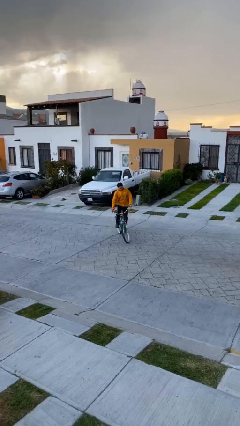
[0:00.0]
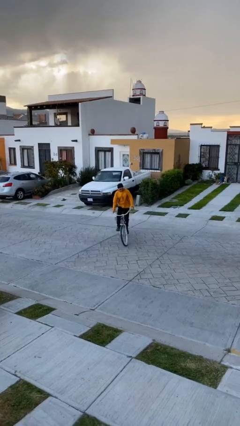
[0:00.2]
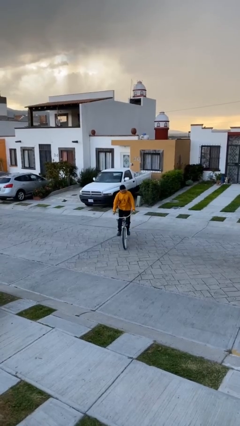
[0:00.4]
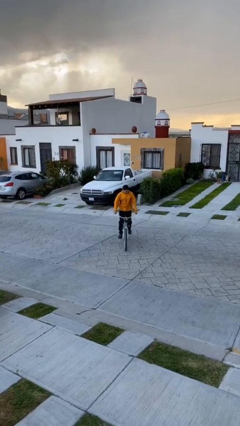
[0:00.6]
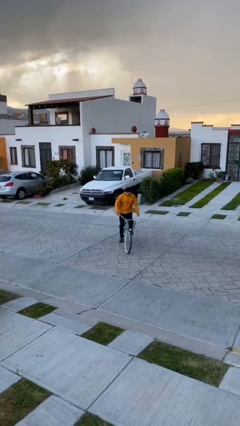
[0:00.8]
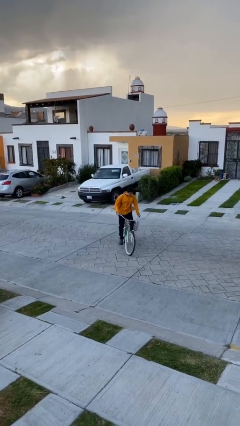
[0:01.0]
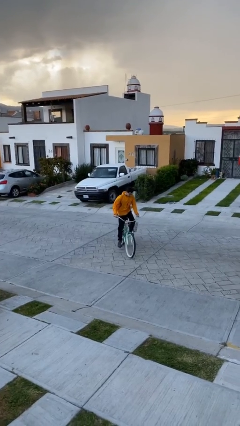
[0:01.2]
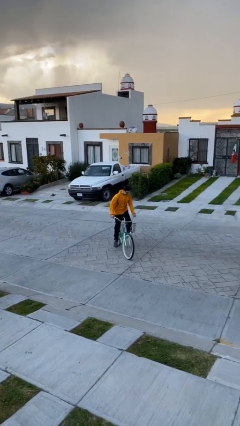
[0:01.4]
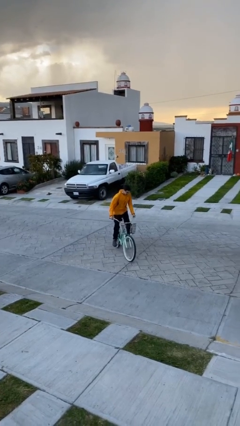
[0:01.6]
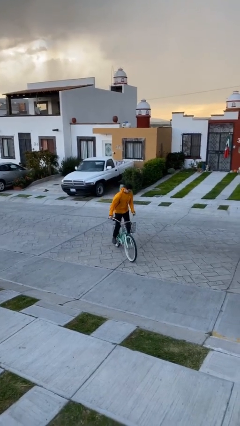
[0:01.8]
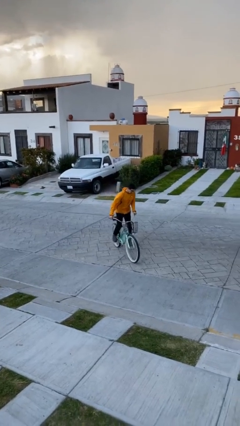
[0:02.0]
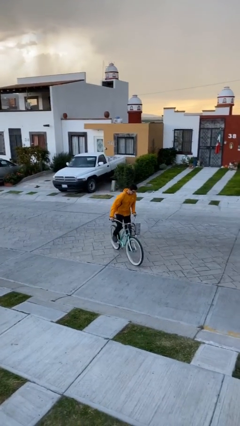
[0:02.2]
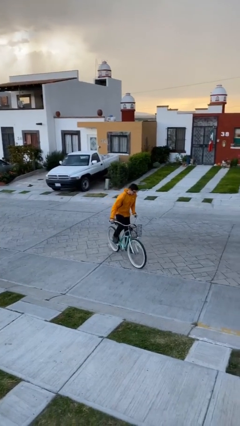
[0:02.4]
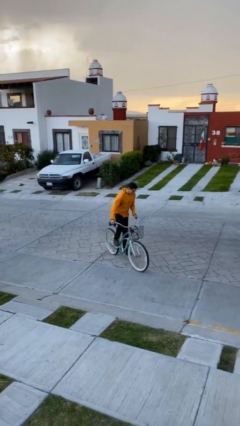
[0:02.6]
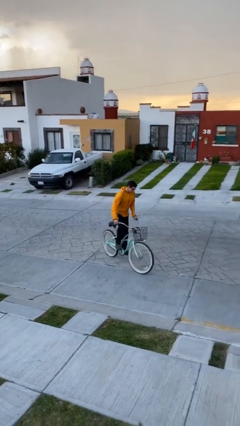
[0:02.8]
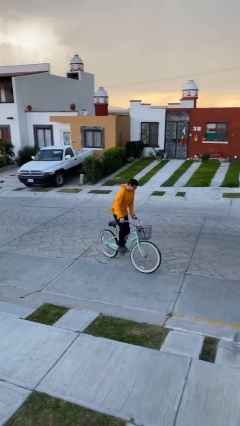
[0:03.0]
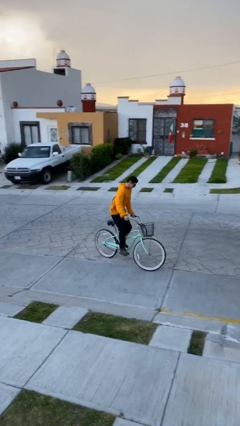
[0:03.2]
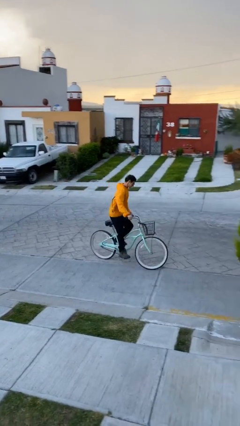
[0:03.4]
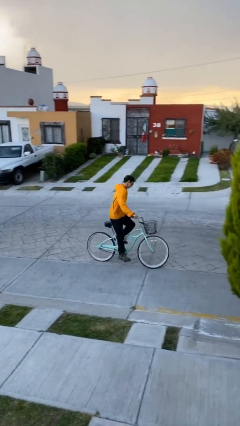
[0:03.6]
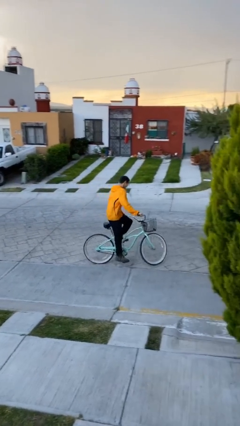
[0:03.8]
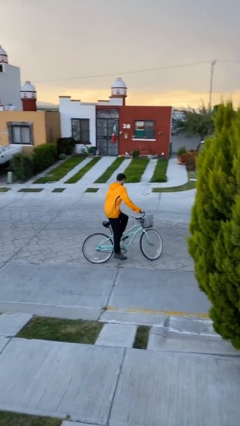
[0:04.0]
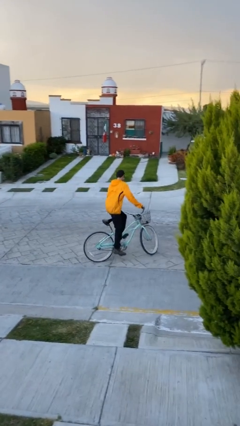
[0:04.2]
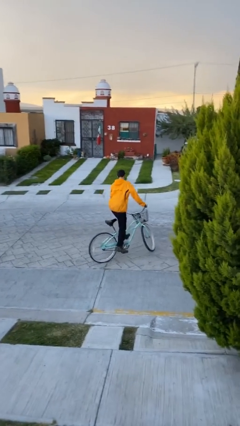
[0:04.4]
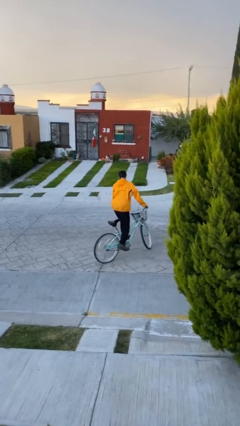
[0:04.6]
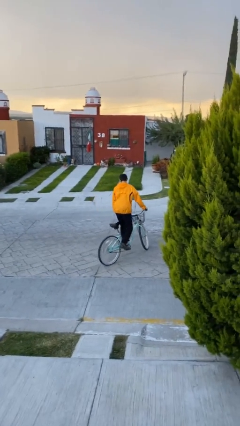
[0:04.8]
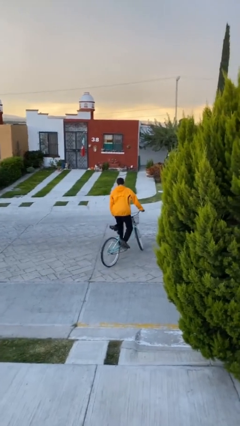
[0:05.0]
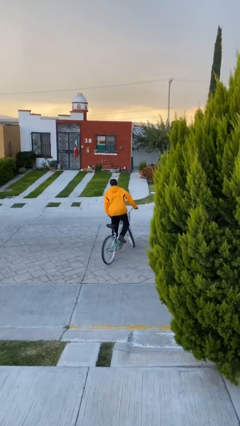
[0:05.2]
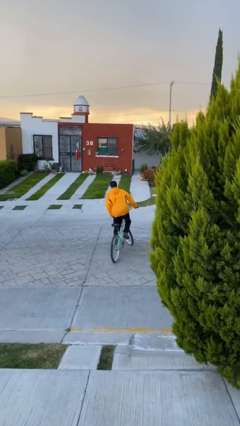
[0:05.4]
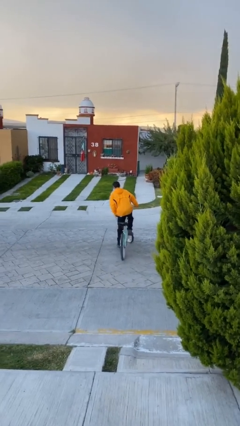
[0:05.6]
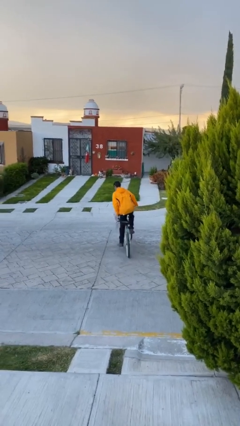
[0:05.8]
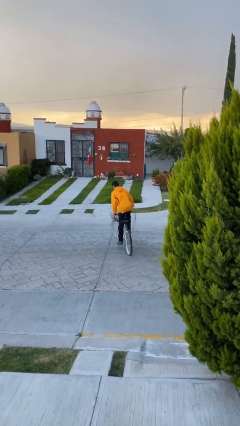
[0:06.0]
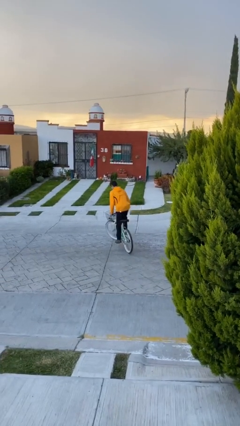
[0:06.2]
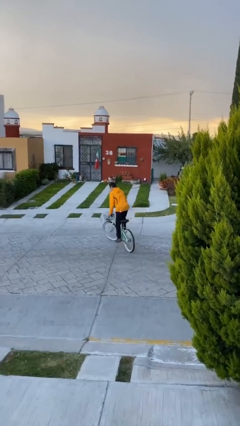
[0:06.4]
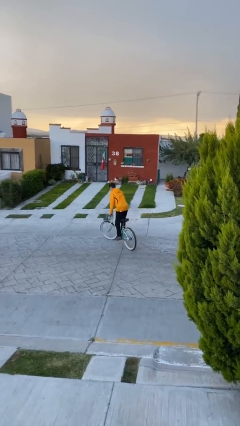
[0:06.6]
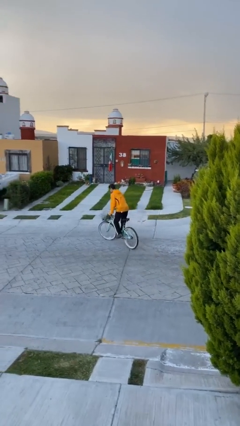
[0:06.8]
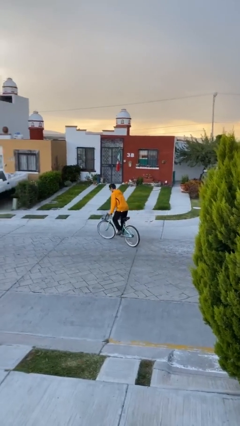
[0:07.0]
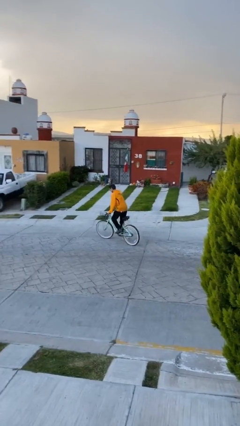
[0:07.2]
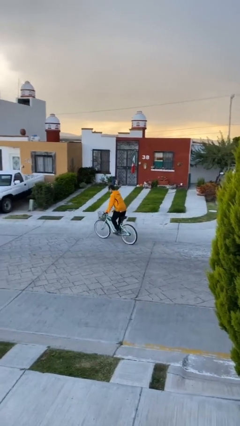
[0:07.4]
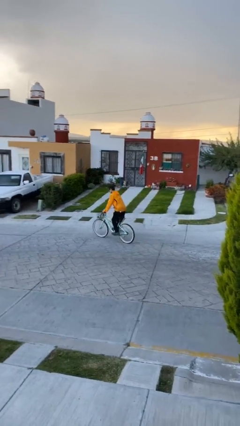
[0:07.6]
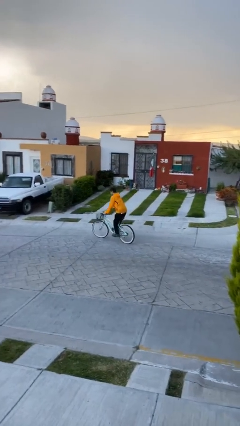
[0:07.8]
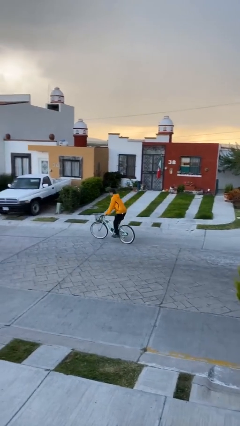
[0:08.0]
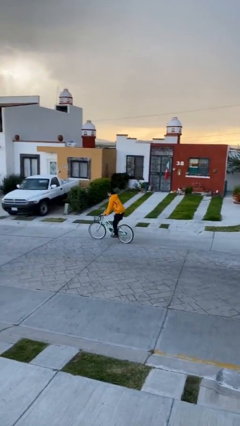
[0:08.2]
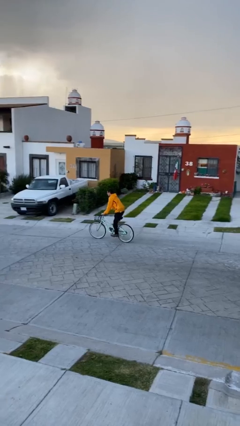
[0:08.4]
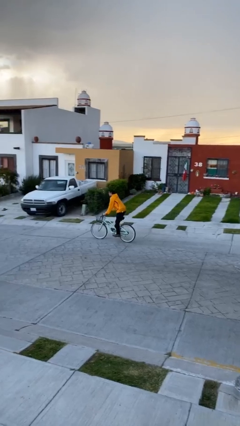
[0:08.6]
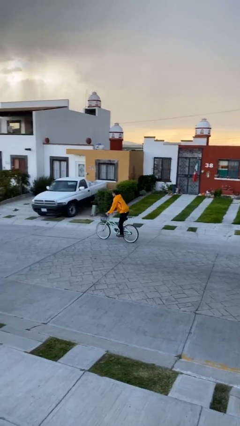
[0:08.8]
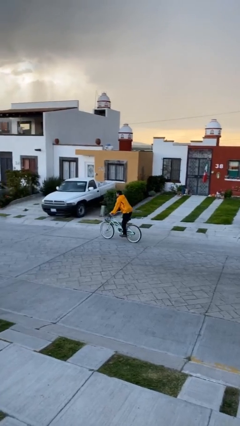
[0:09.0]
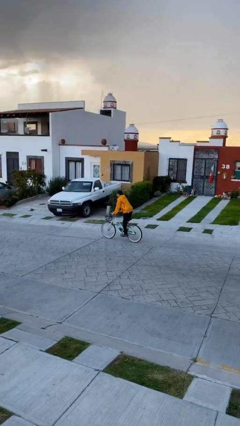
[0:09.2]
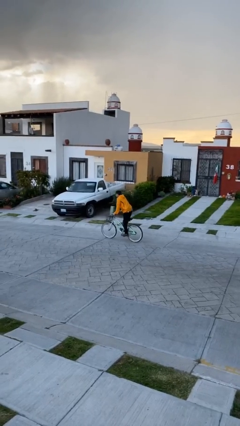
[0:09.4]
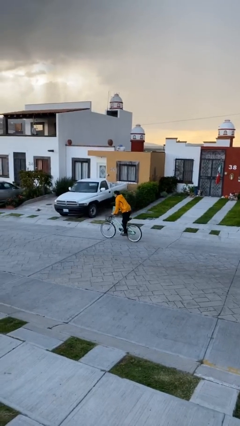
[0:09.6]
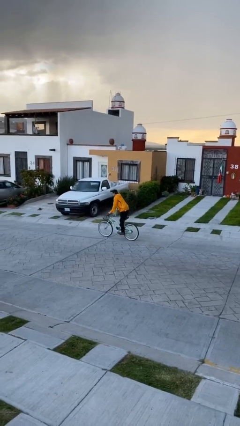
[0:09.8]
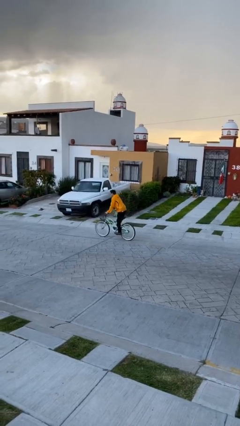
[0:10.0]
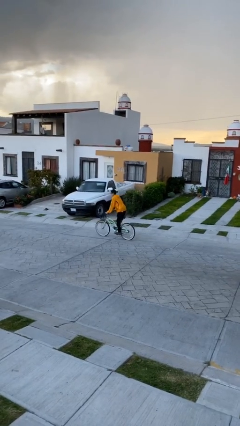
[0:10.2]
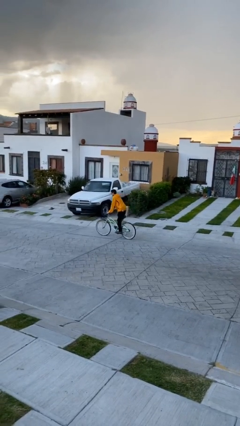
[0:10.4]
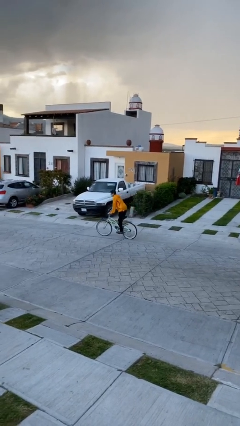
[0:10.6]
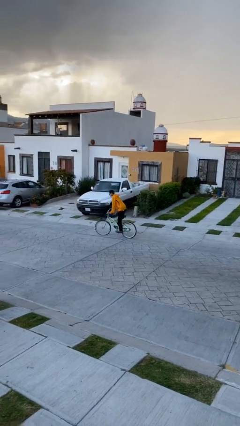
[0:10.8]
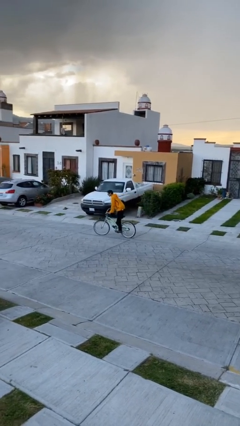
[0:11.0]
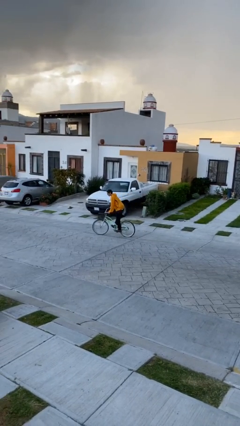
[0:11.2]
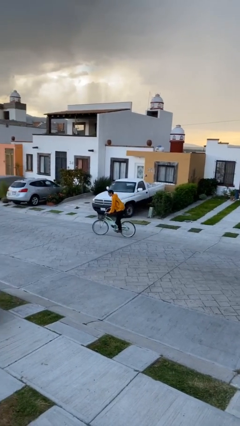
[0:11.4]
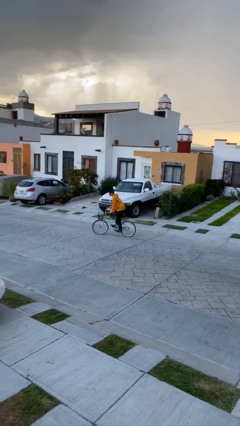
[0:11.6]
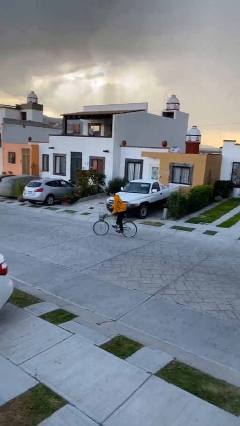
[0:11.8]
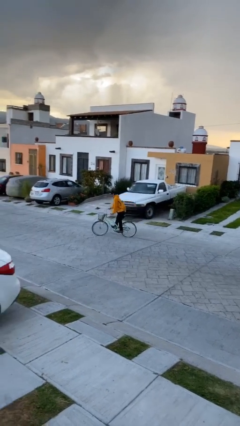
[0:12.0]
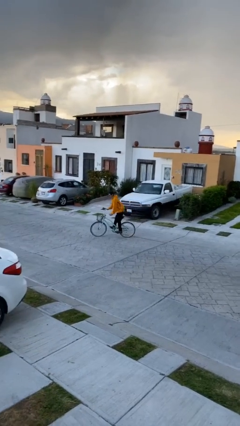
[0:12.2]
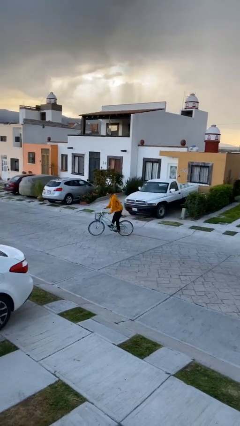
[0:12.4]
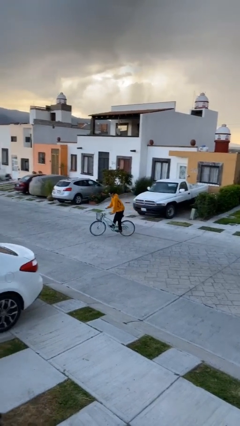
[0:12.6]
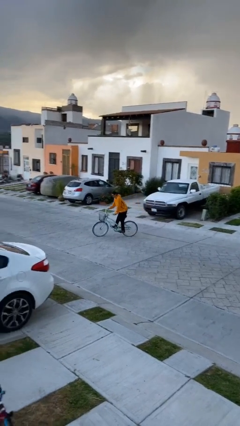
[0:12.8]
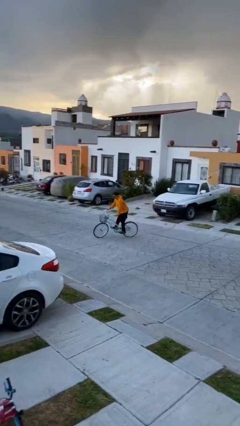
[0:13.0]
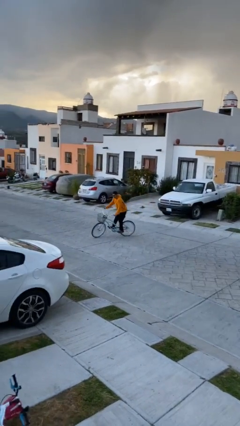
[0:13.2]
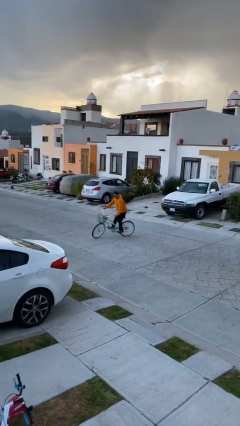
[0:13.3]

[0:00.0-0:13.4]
person rides bicycle

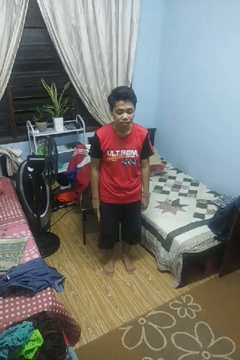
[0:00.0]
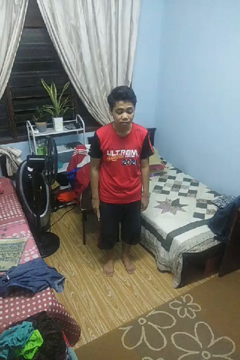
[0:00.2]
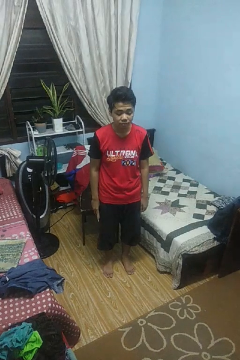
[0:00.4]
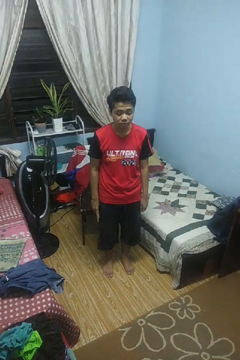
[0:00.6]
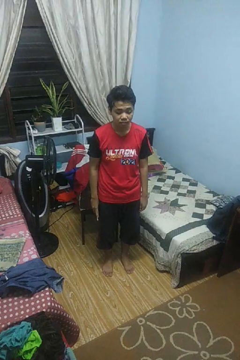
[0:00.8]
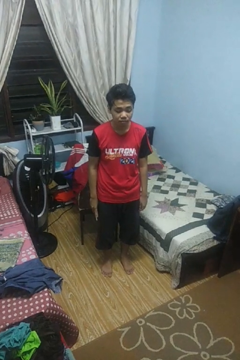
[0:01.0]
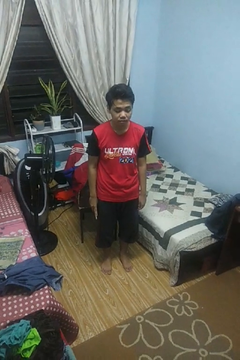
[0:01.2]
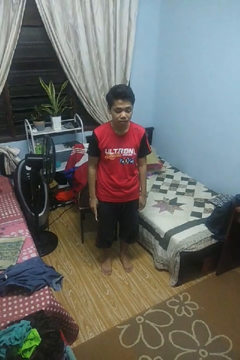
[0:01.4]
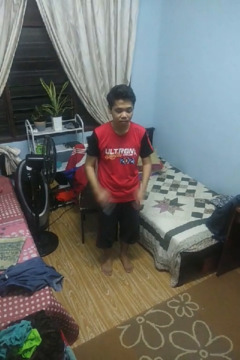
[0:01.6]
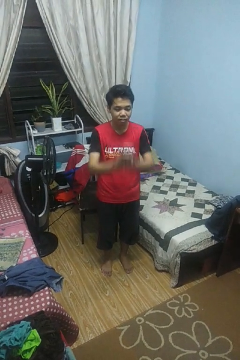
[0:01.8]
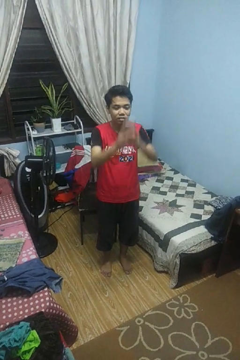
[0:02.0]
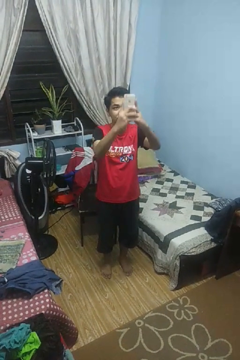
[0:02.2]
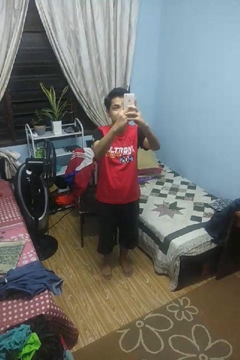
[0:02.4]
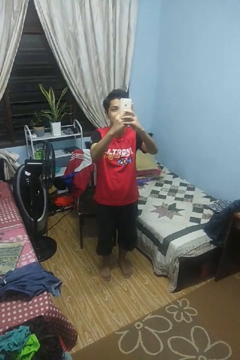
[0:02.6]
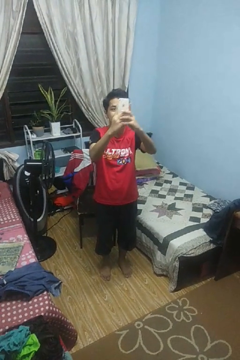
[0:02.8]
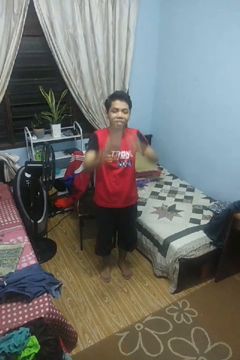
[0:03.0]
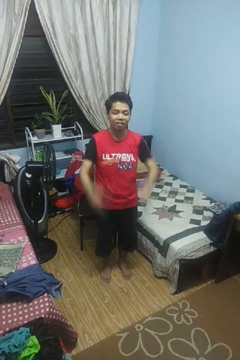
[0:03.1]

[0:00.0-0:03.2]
person takes selfie

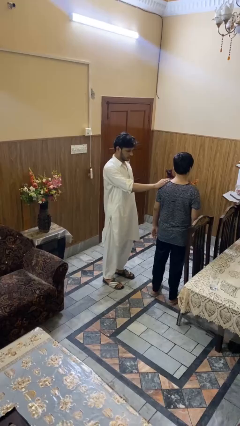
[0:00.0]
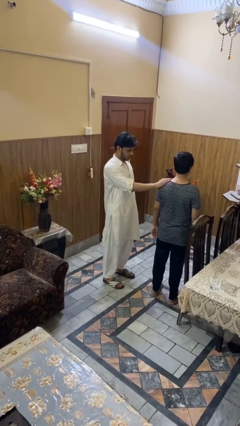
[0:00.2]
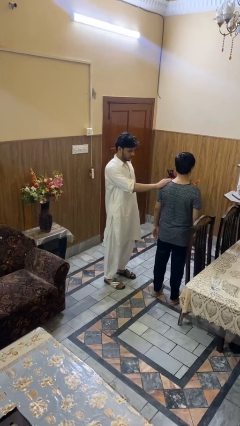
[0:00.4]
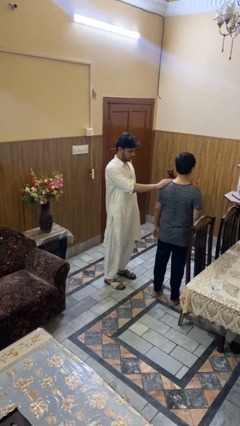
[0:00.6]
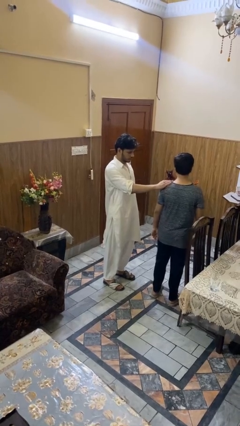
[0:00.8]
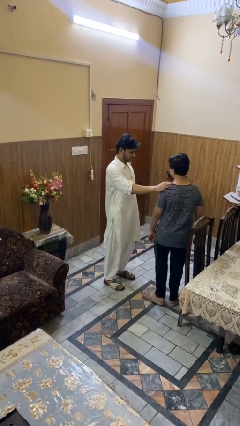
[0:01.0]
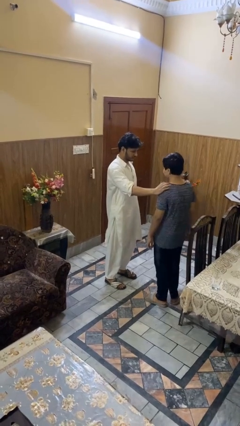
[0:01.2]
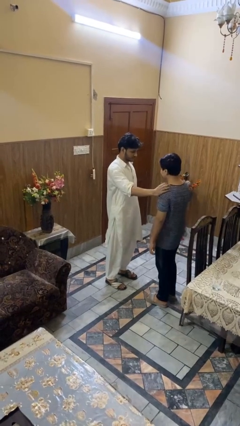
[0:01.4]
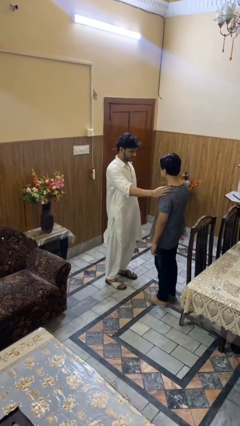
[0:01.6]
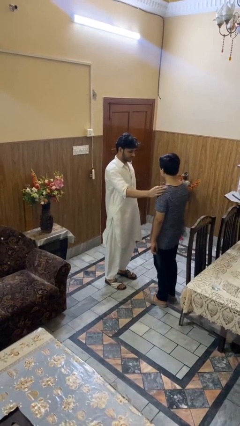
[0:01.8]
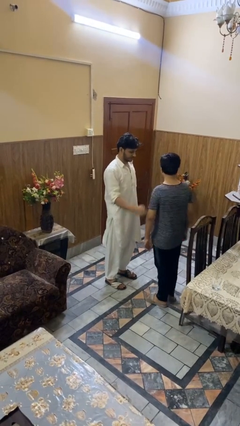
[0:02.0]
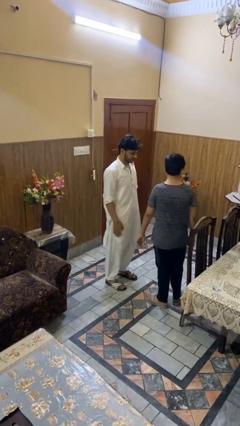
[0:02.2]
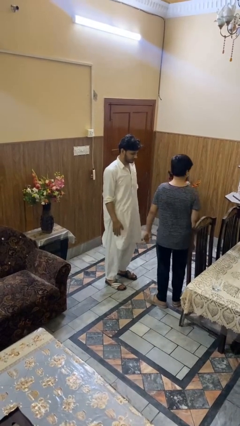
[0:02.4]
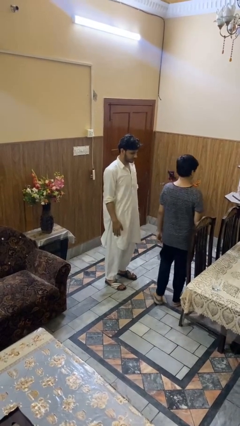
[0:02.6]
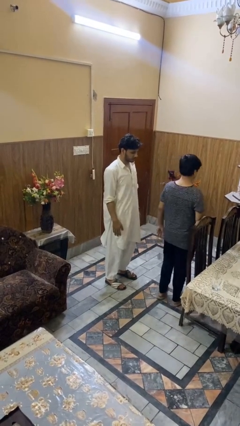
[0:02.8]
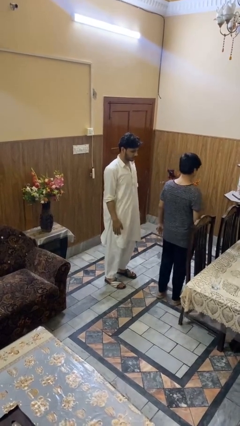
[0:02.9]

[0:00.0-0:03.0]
person spins person around
